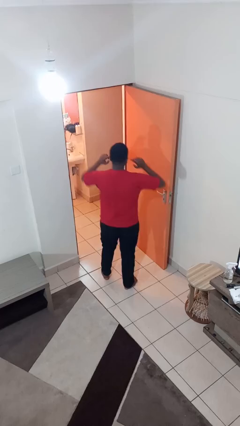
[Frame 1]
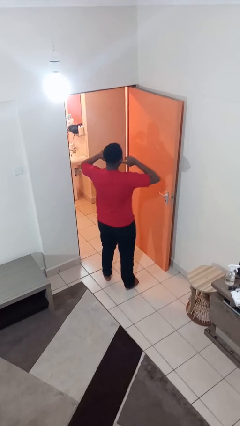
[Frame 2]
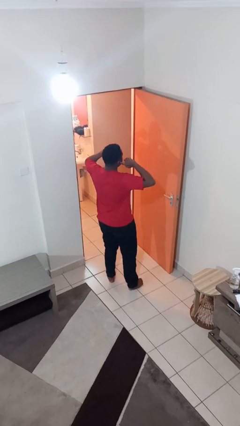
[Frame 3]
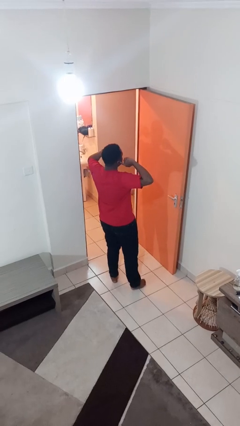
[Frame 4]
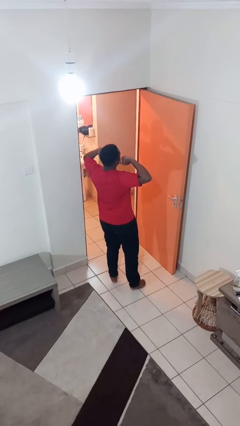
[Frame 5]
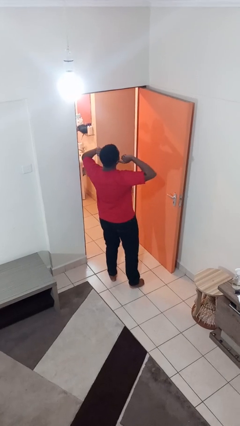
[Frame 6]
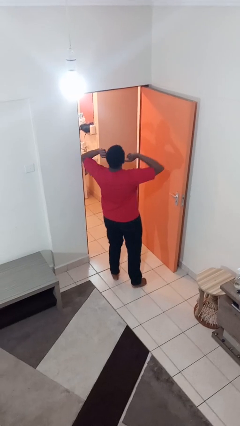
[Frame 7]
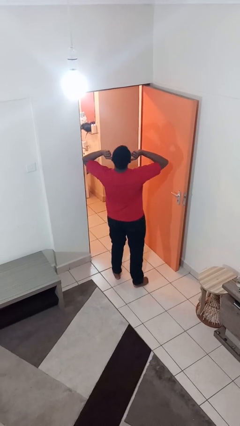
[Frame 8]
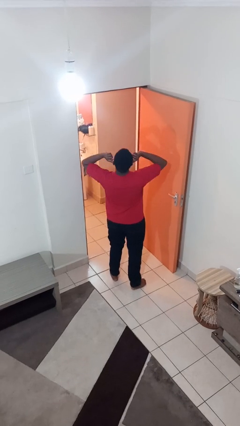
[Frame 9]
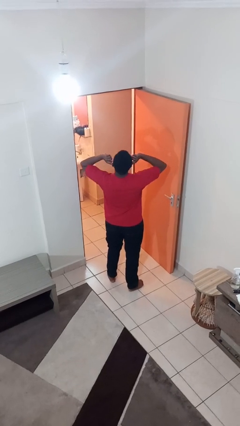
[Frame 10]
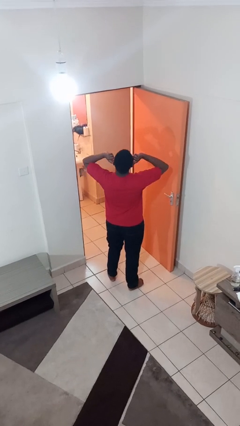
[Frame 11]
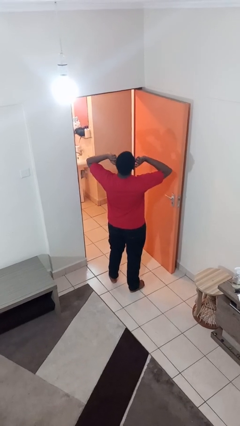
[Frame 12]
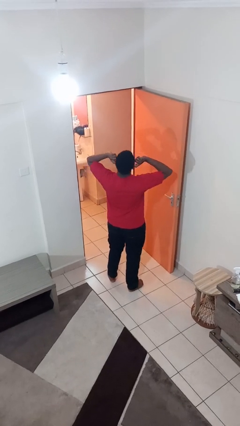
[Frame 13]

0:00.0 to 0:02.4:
person puts fingers in ear

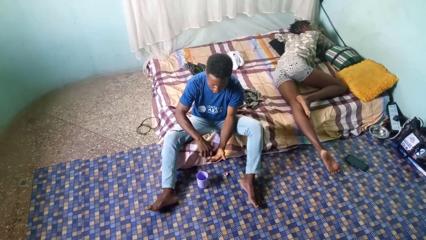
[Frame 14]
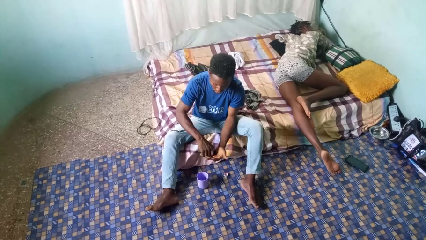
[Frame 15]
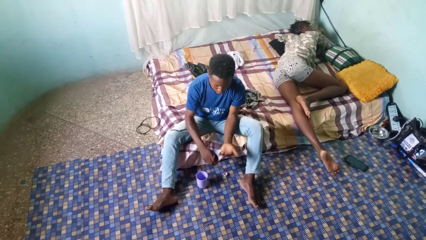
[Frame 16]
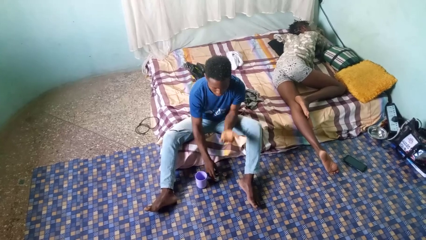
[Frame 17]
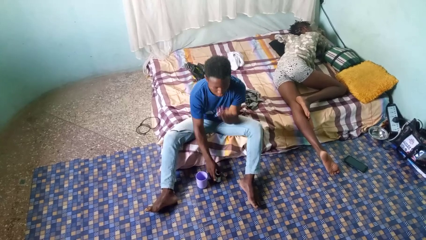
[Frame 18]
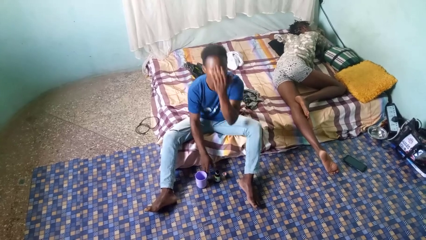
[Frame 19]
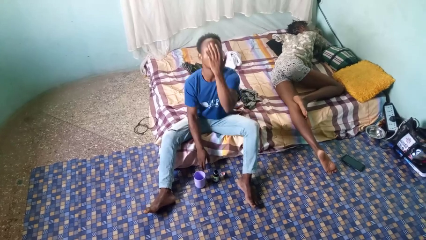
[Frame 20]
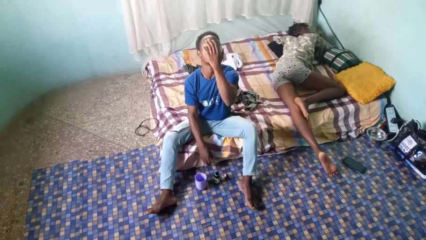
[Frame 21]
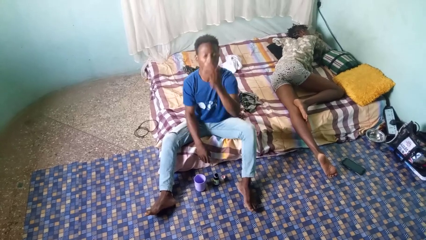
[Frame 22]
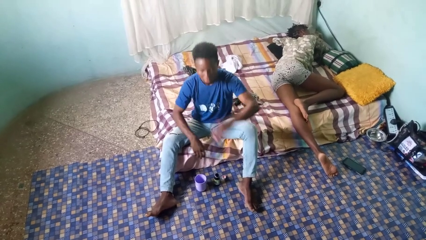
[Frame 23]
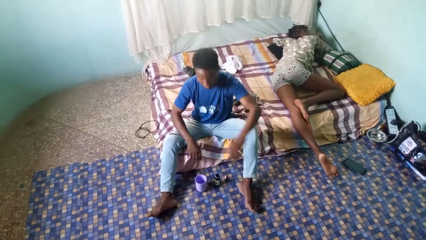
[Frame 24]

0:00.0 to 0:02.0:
person takes medicine pills

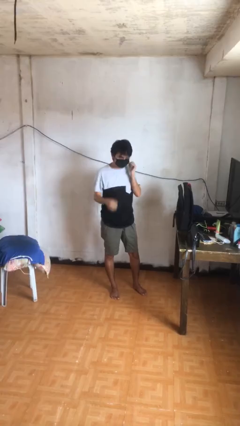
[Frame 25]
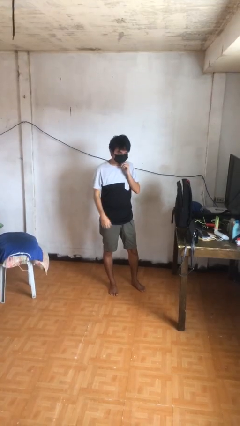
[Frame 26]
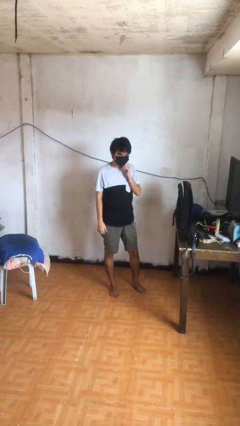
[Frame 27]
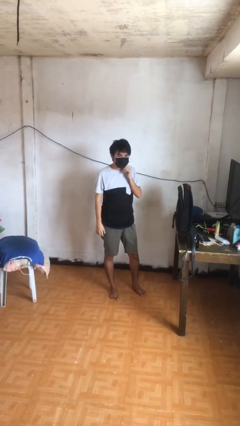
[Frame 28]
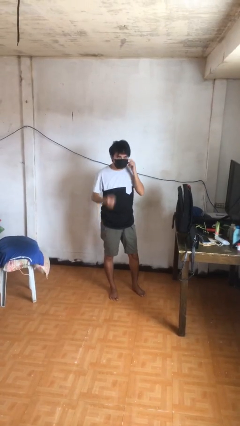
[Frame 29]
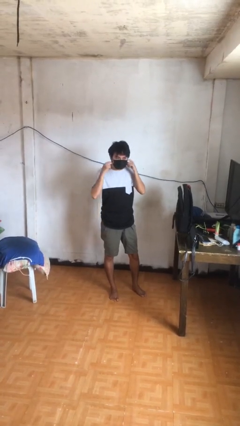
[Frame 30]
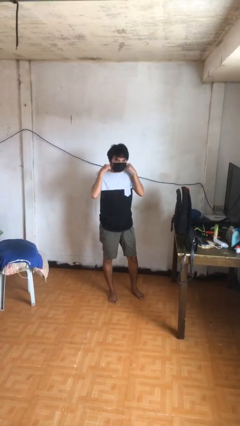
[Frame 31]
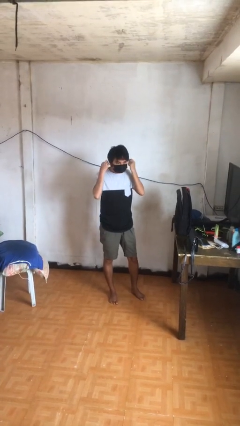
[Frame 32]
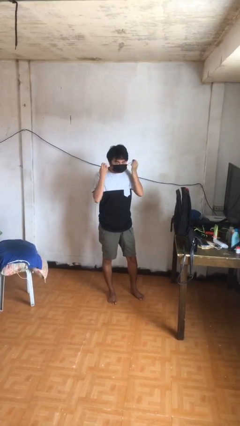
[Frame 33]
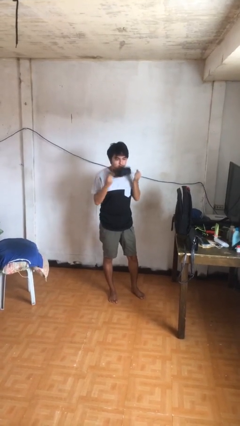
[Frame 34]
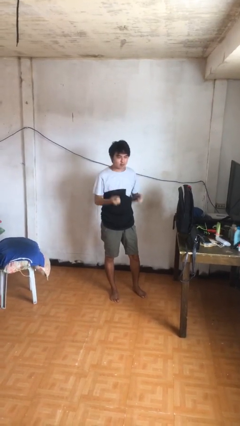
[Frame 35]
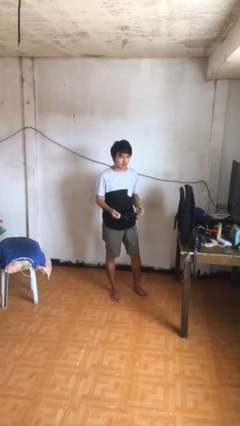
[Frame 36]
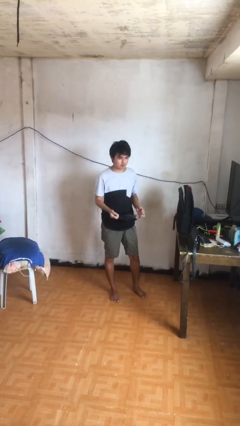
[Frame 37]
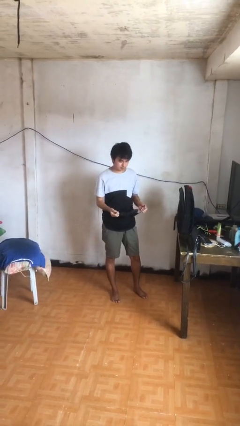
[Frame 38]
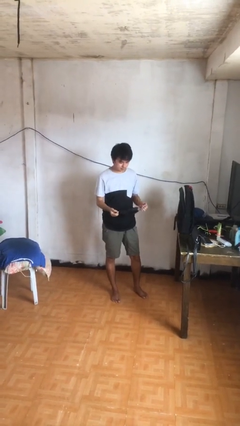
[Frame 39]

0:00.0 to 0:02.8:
person takes off facemask

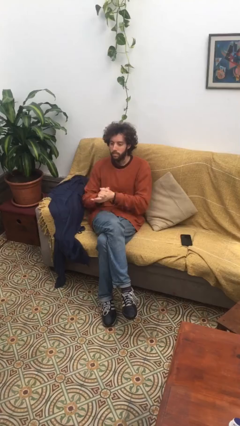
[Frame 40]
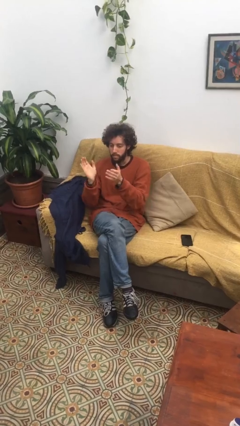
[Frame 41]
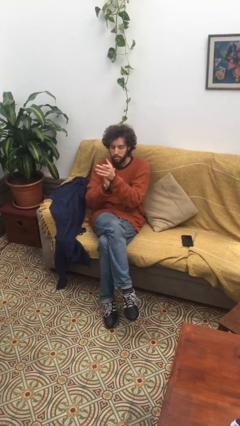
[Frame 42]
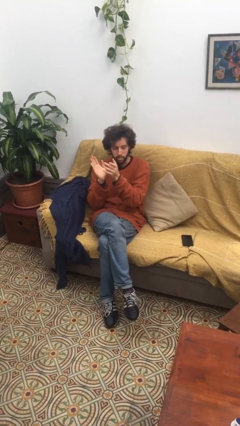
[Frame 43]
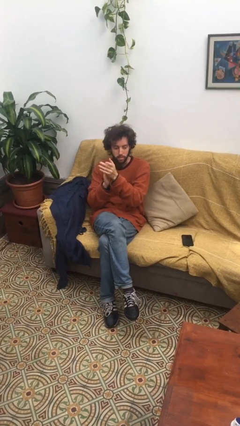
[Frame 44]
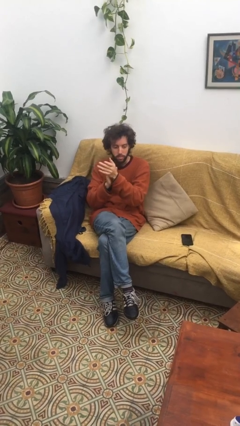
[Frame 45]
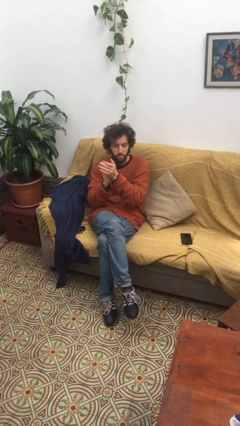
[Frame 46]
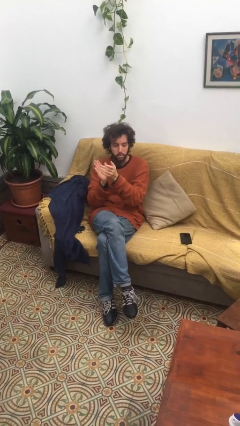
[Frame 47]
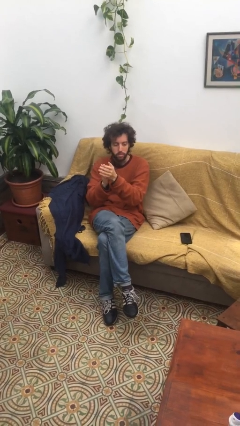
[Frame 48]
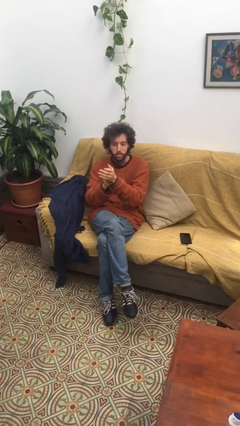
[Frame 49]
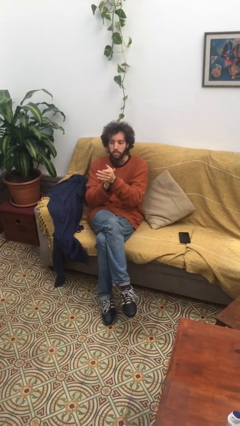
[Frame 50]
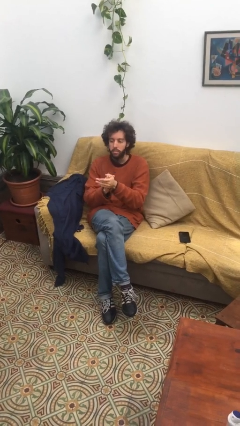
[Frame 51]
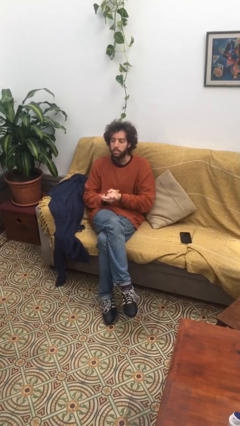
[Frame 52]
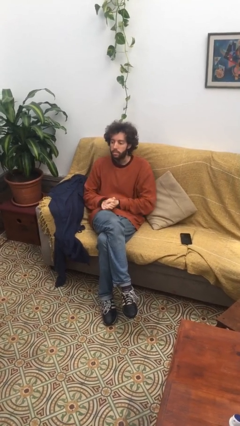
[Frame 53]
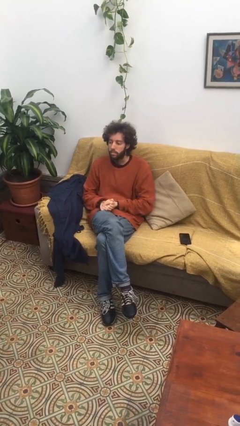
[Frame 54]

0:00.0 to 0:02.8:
person claps hands

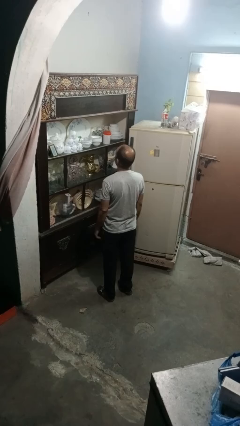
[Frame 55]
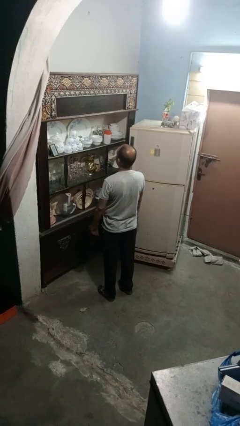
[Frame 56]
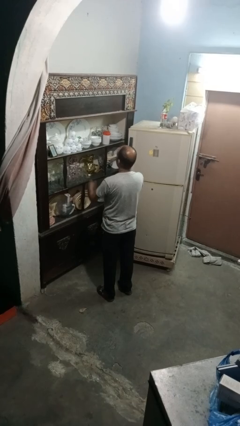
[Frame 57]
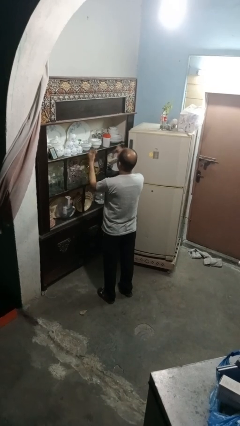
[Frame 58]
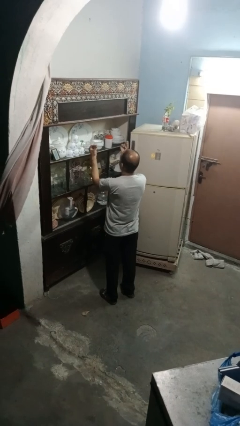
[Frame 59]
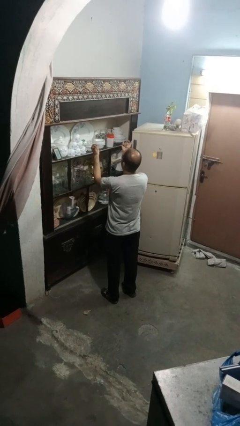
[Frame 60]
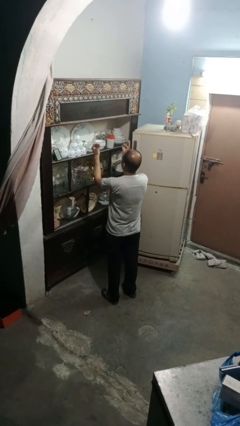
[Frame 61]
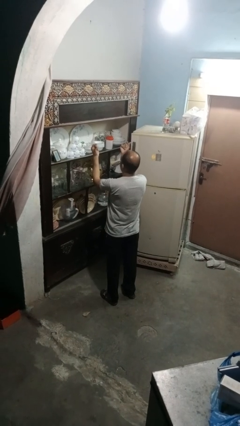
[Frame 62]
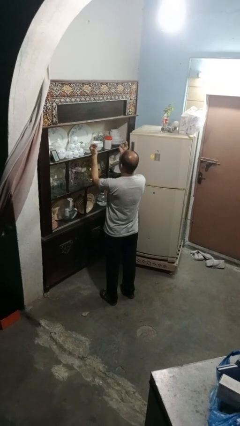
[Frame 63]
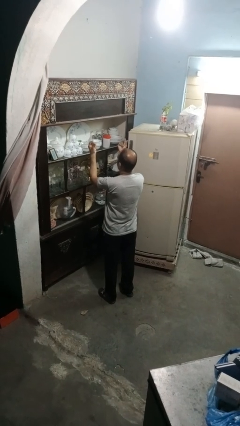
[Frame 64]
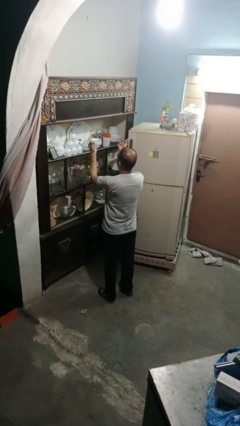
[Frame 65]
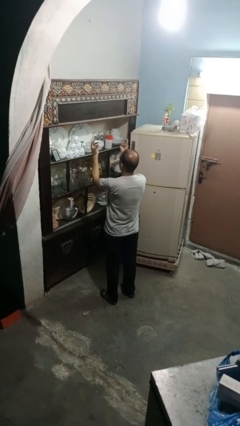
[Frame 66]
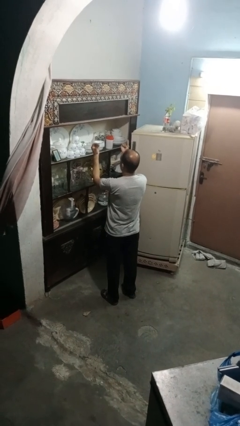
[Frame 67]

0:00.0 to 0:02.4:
person snaps fingers

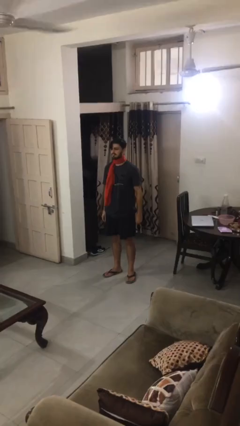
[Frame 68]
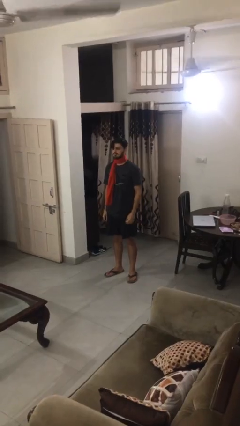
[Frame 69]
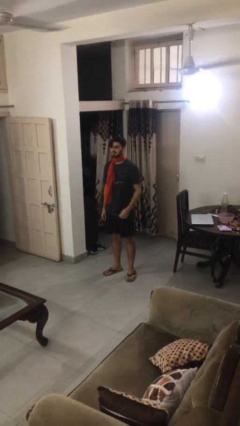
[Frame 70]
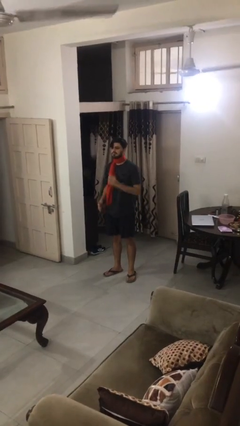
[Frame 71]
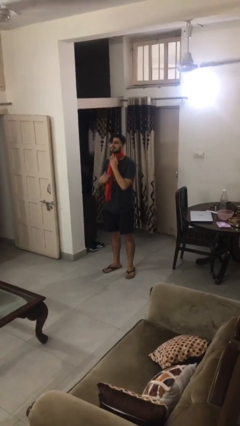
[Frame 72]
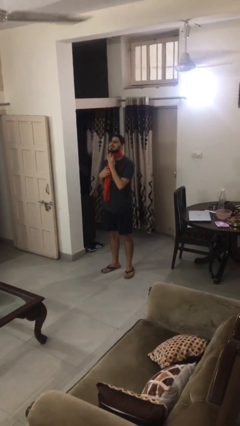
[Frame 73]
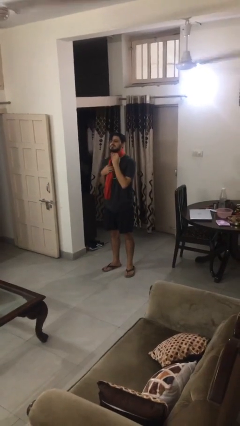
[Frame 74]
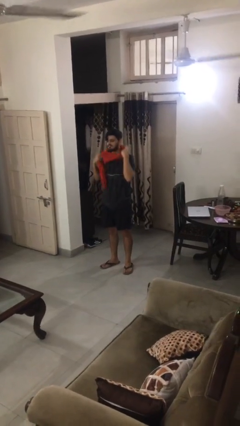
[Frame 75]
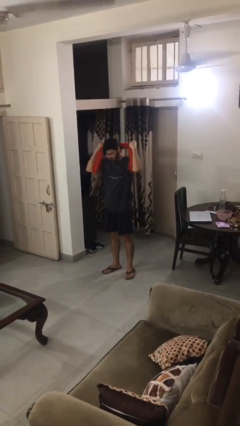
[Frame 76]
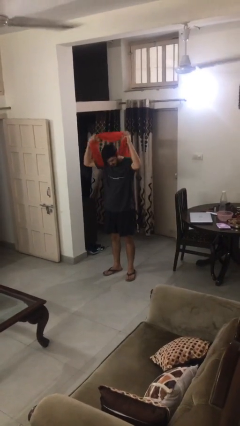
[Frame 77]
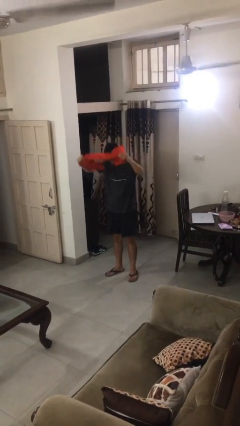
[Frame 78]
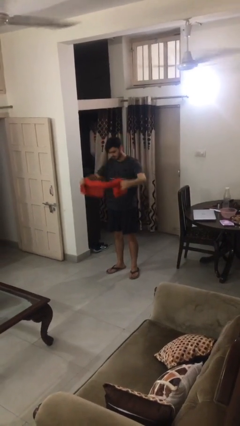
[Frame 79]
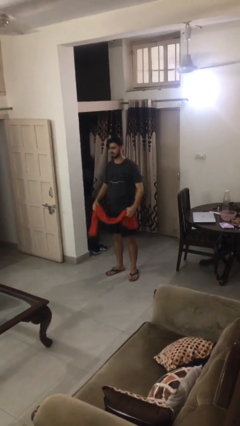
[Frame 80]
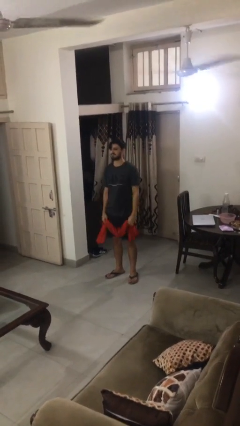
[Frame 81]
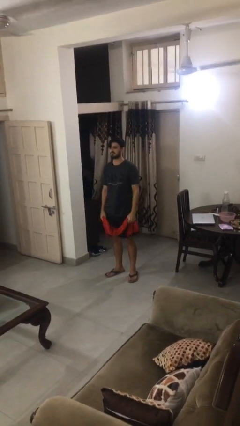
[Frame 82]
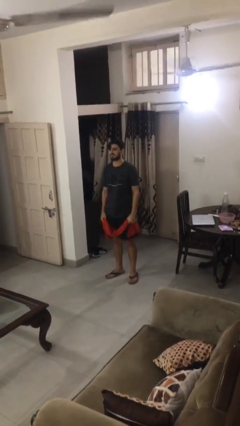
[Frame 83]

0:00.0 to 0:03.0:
person takes off scarf

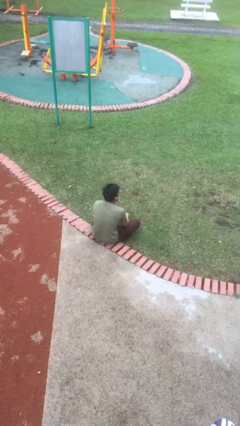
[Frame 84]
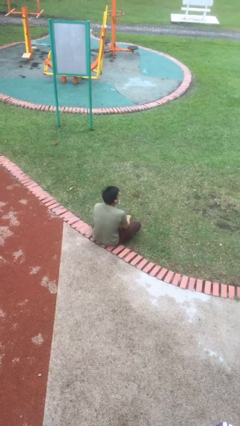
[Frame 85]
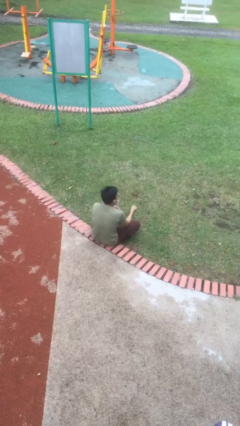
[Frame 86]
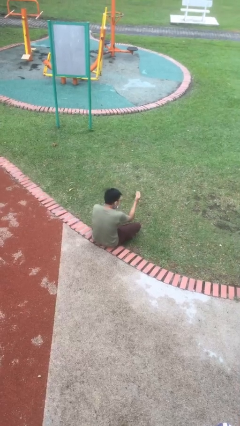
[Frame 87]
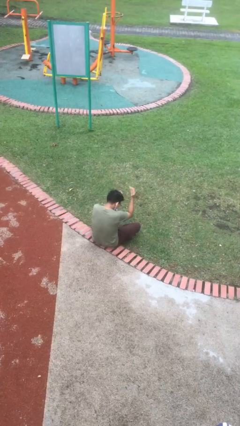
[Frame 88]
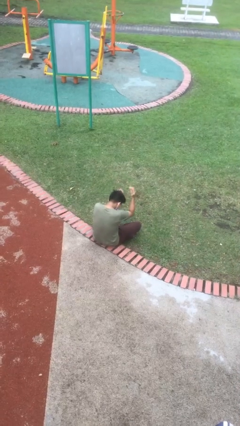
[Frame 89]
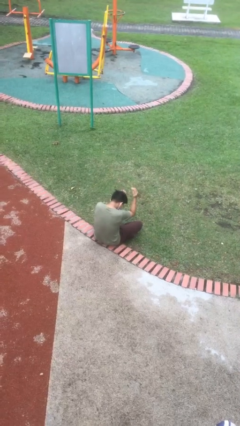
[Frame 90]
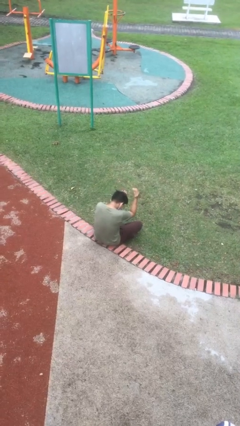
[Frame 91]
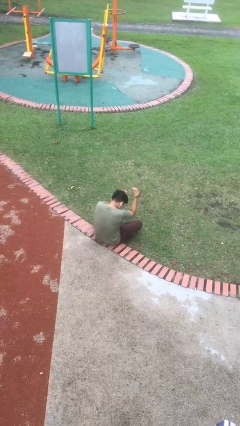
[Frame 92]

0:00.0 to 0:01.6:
person prays
